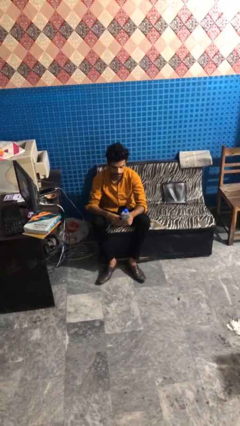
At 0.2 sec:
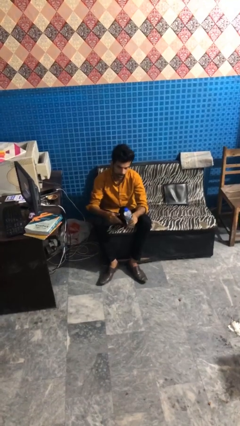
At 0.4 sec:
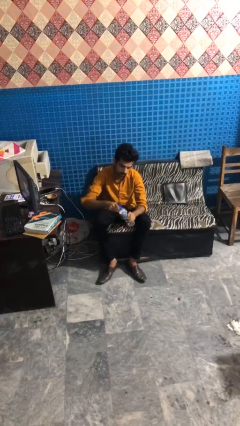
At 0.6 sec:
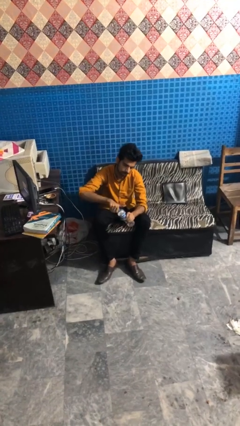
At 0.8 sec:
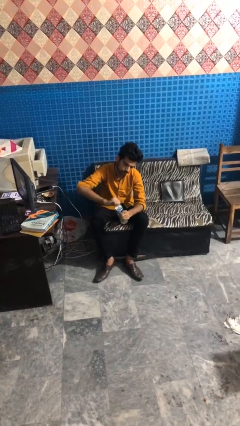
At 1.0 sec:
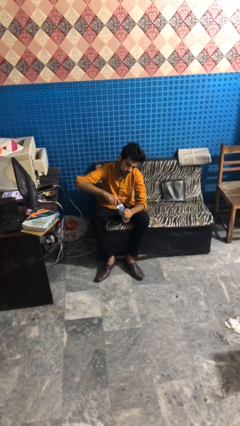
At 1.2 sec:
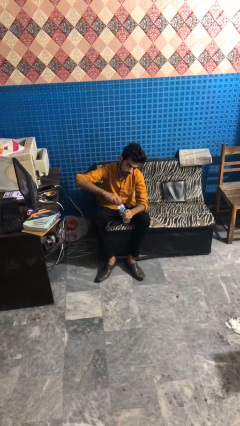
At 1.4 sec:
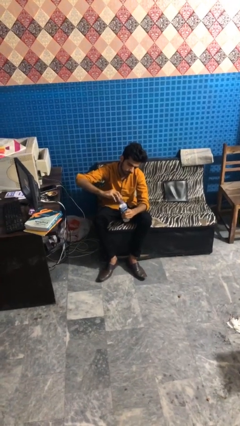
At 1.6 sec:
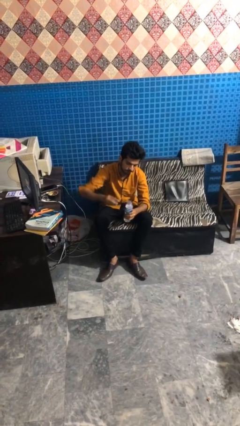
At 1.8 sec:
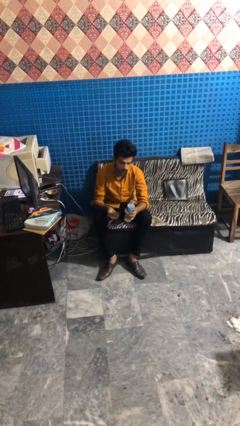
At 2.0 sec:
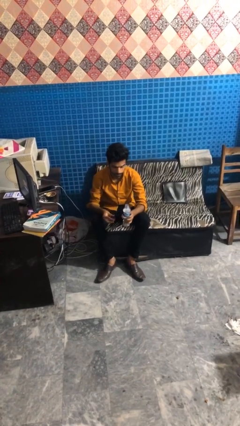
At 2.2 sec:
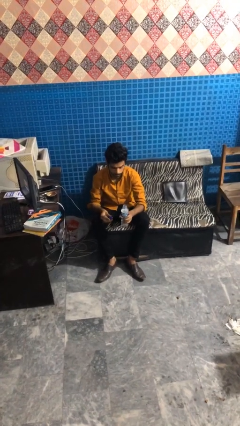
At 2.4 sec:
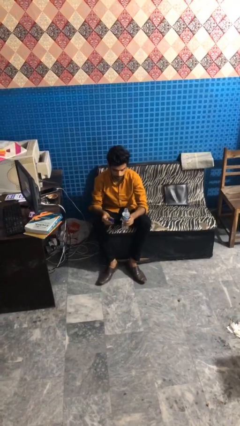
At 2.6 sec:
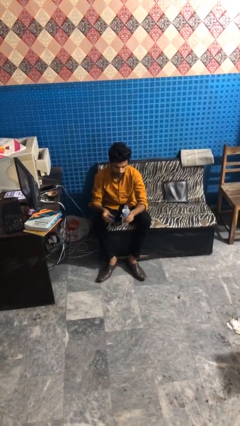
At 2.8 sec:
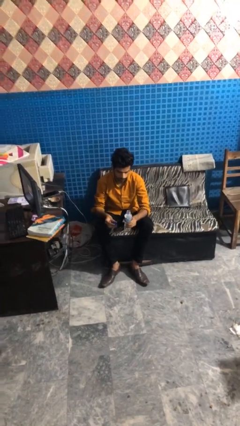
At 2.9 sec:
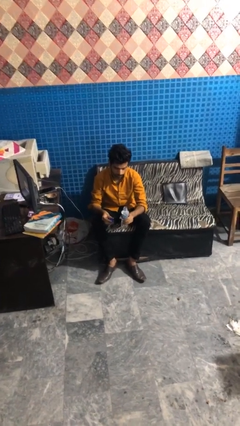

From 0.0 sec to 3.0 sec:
person unscrews lid from bottle

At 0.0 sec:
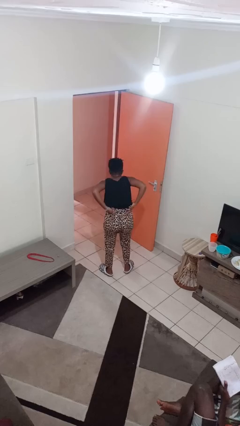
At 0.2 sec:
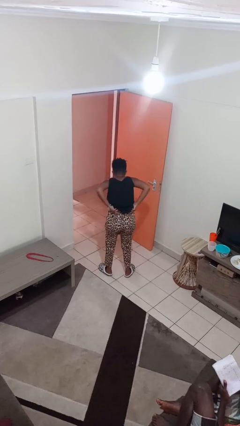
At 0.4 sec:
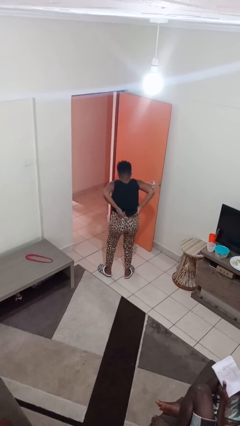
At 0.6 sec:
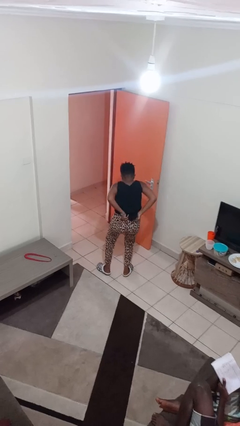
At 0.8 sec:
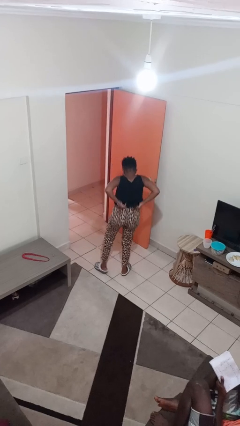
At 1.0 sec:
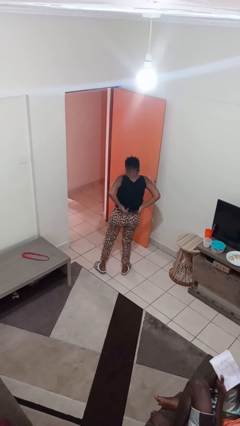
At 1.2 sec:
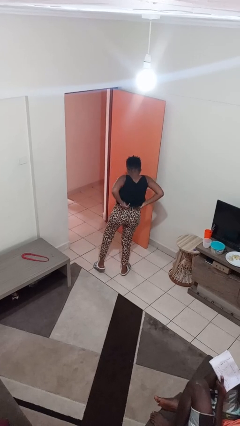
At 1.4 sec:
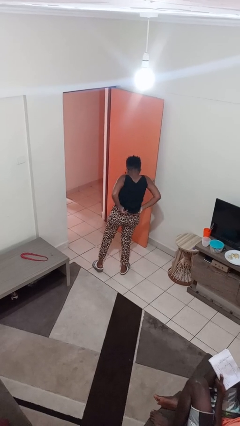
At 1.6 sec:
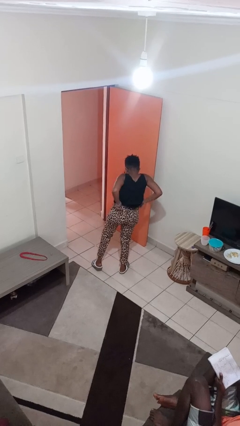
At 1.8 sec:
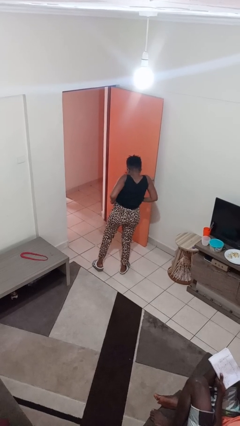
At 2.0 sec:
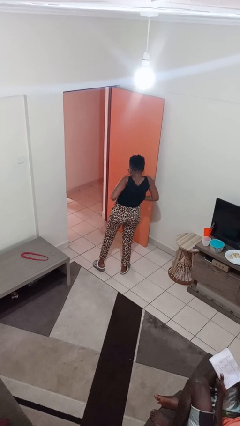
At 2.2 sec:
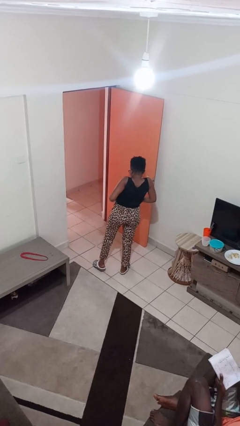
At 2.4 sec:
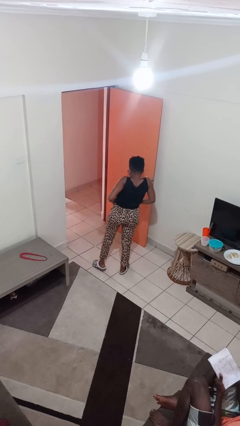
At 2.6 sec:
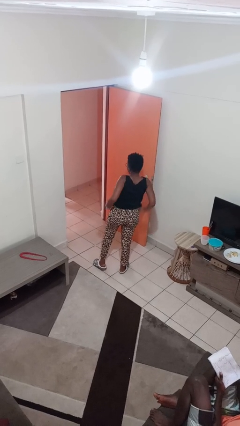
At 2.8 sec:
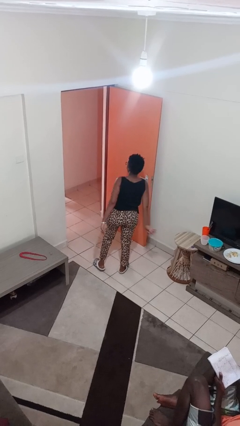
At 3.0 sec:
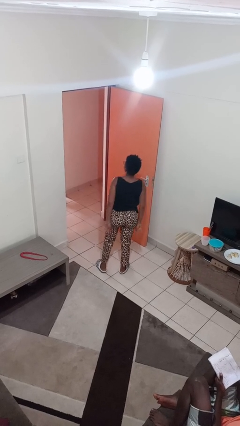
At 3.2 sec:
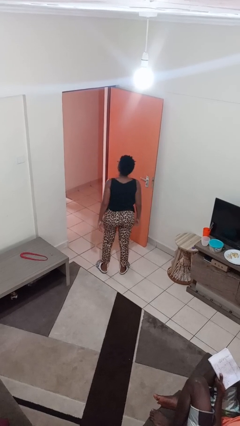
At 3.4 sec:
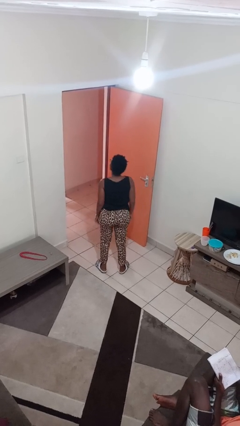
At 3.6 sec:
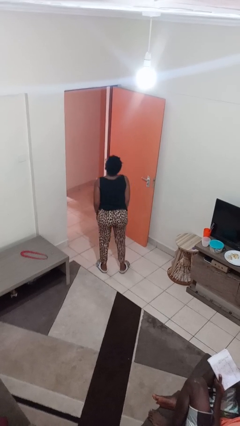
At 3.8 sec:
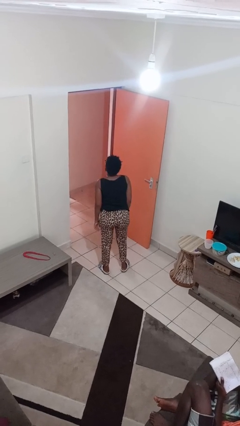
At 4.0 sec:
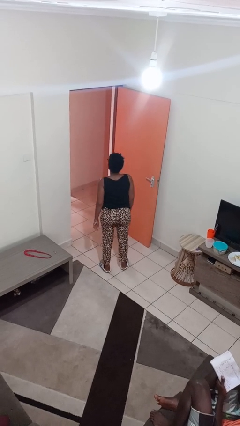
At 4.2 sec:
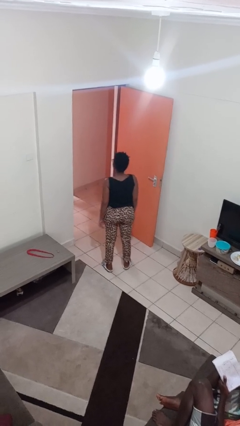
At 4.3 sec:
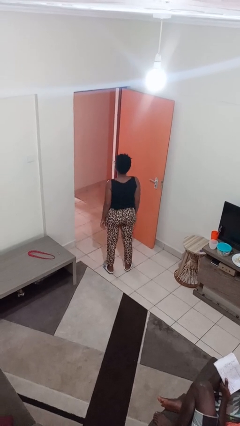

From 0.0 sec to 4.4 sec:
person hikes up pants

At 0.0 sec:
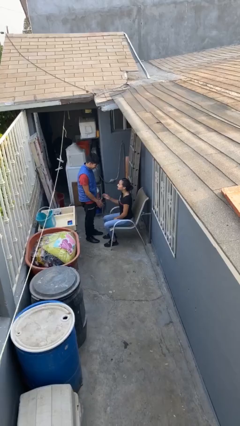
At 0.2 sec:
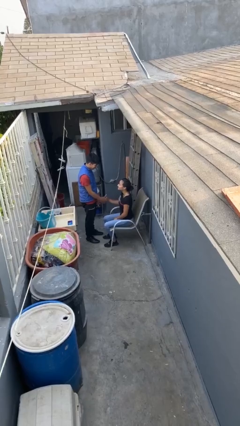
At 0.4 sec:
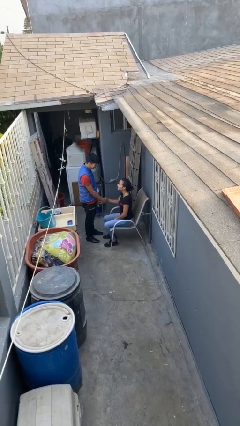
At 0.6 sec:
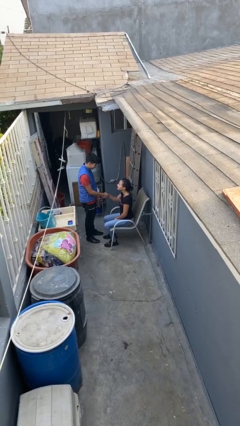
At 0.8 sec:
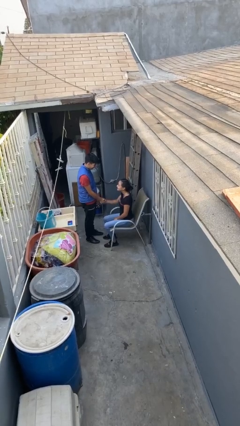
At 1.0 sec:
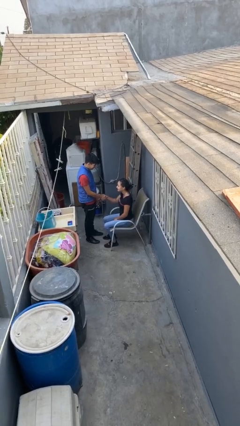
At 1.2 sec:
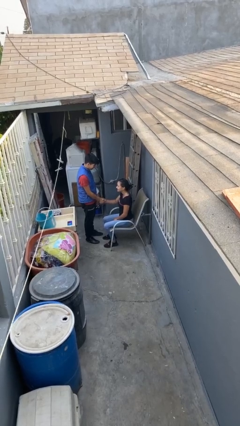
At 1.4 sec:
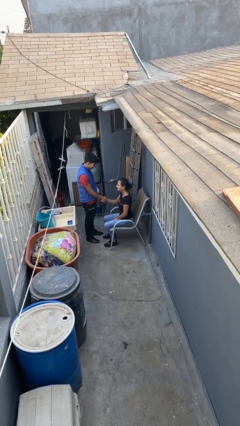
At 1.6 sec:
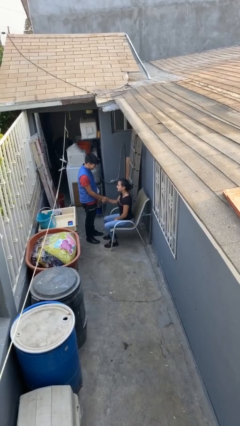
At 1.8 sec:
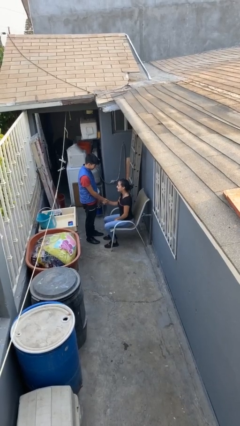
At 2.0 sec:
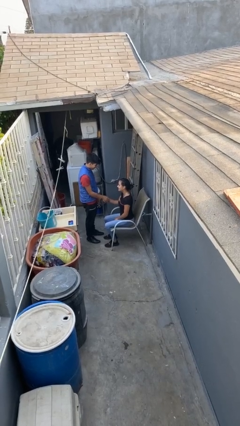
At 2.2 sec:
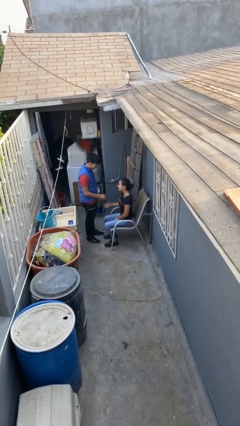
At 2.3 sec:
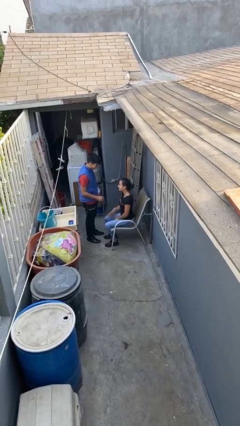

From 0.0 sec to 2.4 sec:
person shakes hand

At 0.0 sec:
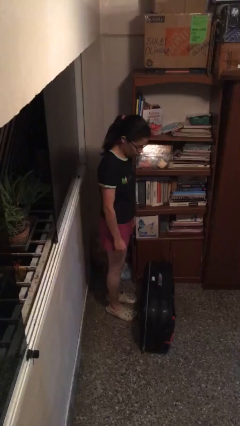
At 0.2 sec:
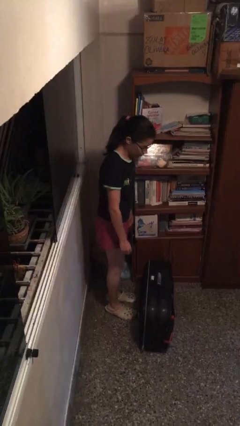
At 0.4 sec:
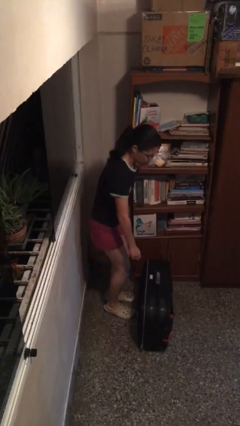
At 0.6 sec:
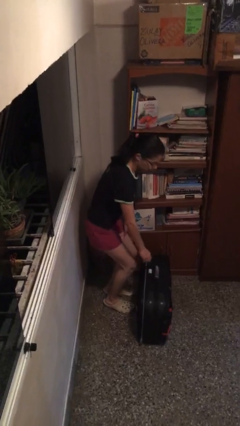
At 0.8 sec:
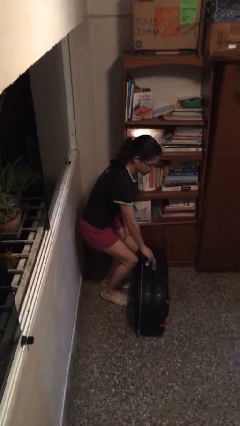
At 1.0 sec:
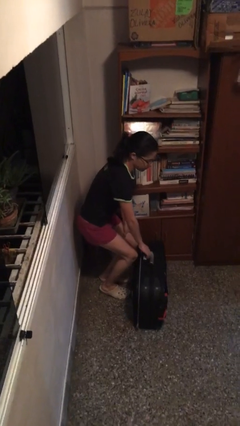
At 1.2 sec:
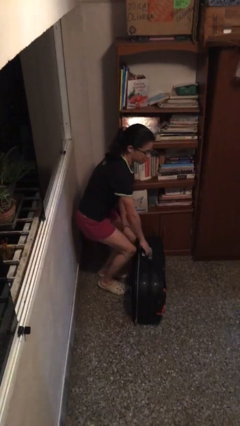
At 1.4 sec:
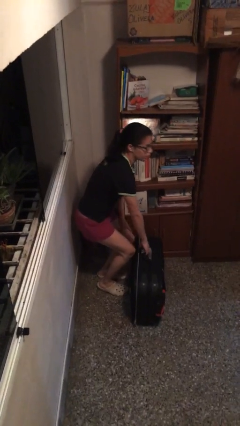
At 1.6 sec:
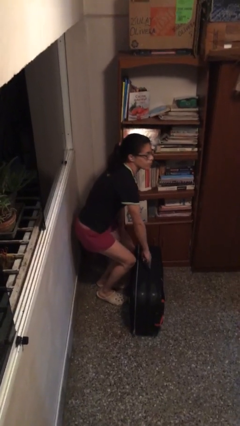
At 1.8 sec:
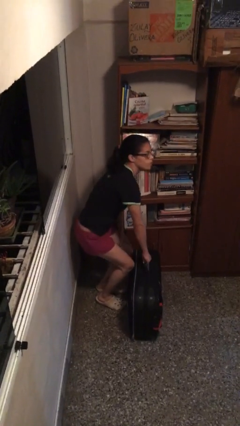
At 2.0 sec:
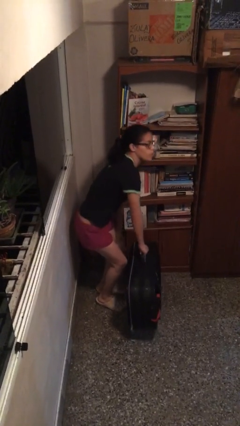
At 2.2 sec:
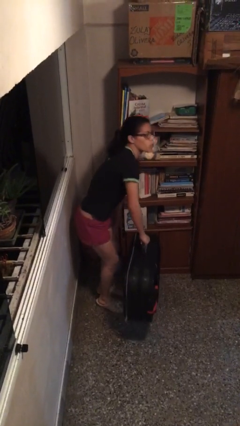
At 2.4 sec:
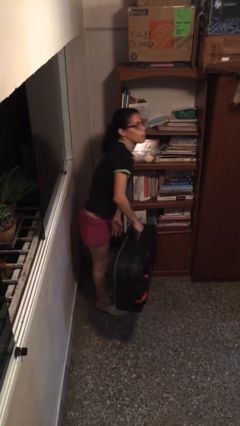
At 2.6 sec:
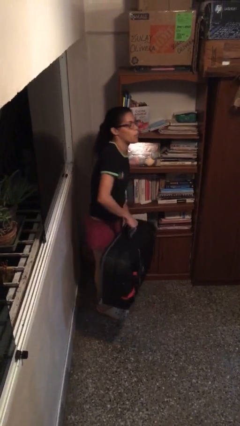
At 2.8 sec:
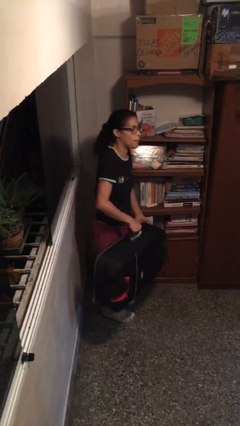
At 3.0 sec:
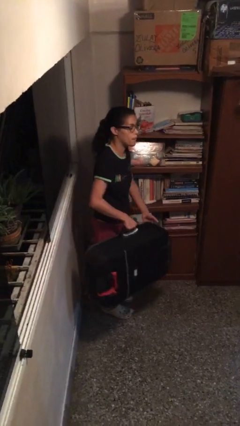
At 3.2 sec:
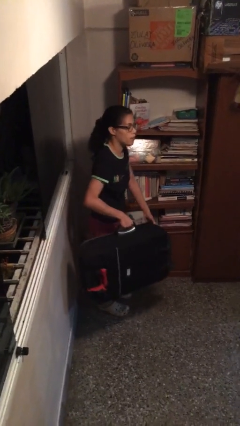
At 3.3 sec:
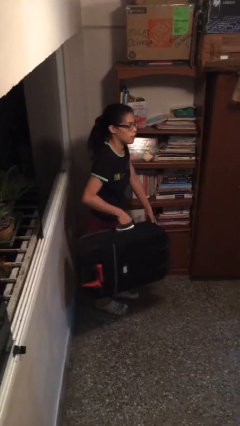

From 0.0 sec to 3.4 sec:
person picks up object from floor

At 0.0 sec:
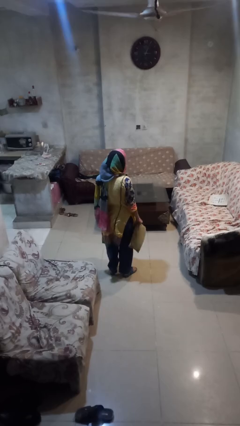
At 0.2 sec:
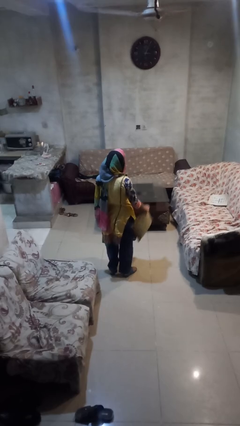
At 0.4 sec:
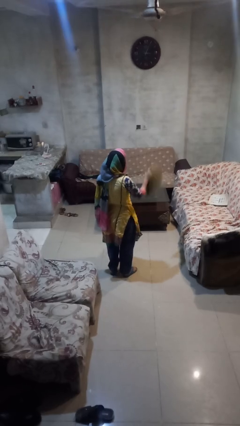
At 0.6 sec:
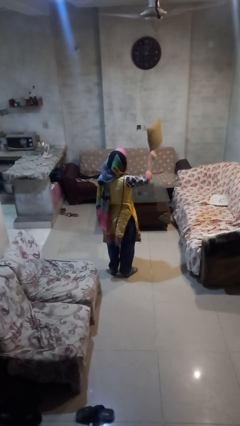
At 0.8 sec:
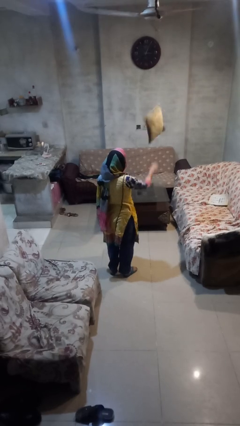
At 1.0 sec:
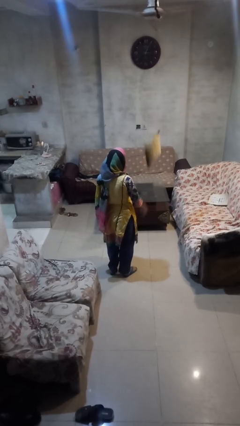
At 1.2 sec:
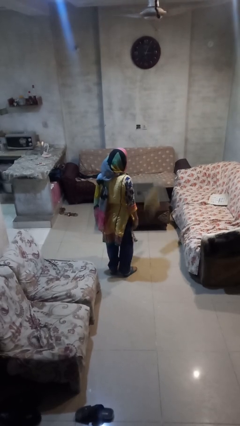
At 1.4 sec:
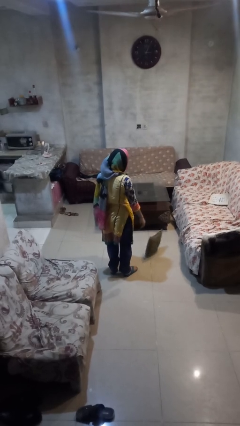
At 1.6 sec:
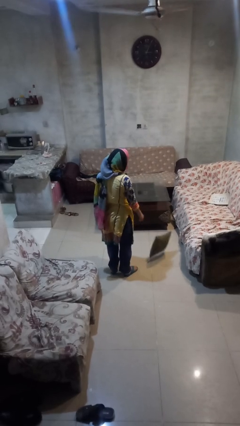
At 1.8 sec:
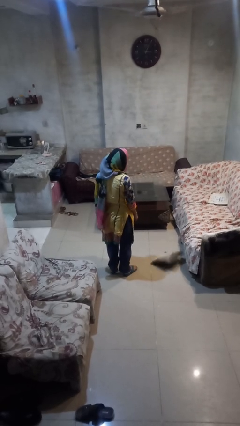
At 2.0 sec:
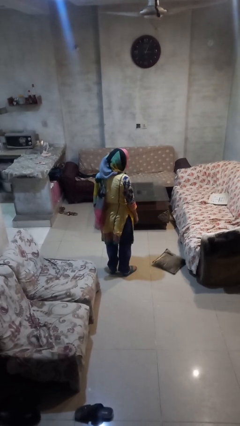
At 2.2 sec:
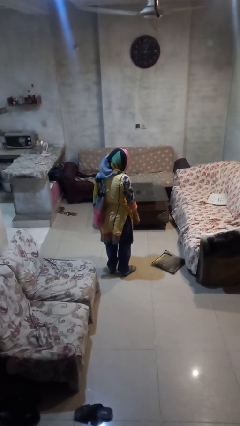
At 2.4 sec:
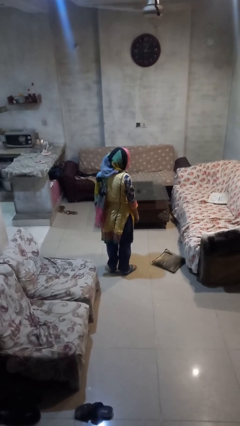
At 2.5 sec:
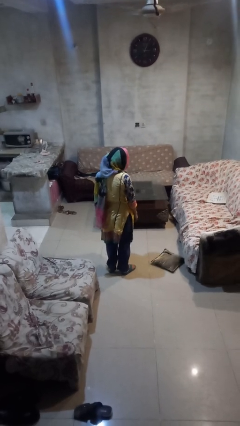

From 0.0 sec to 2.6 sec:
person throws object into air

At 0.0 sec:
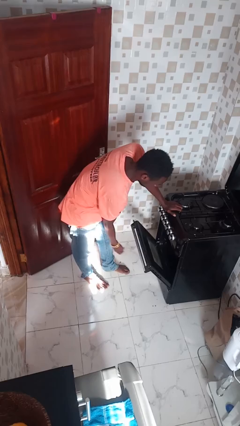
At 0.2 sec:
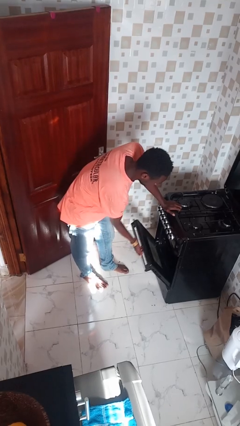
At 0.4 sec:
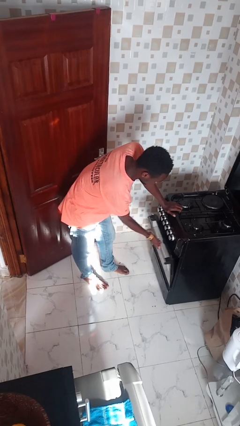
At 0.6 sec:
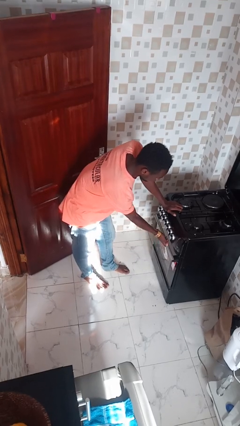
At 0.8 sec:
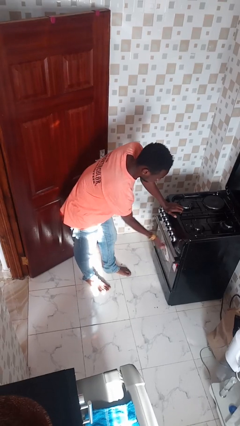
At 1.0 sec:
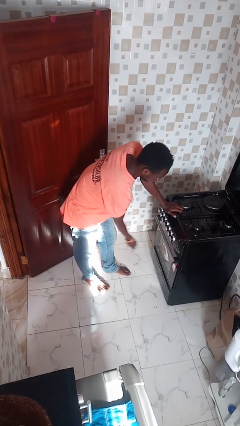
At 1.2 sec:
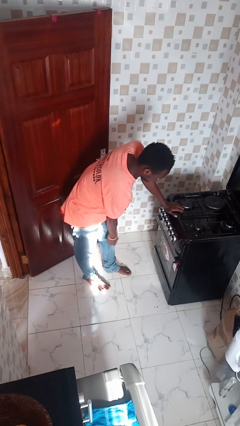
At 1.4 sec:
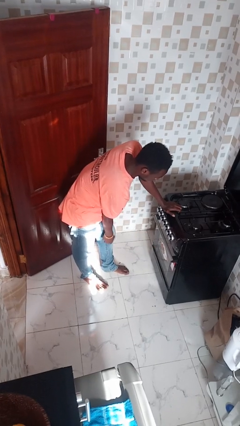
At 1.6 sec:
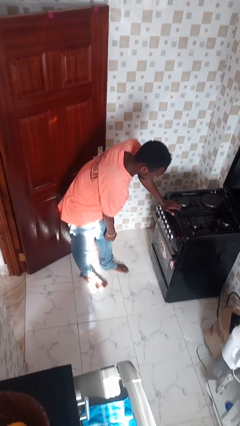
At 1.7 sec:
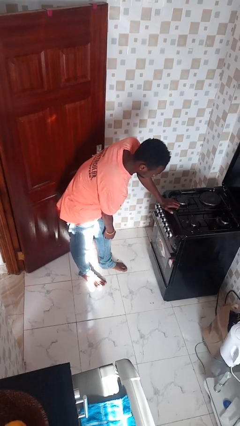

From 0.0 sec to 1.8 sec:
person closes oven door
